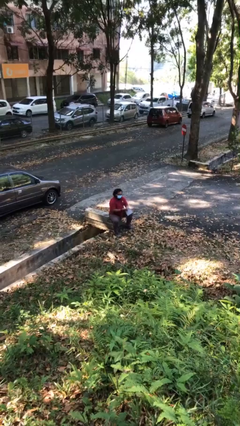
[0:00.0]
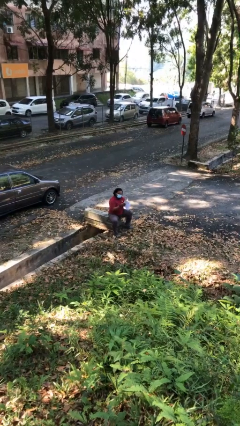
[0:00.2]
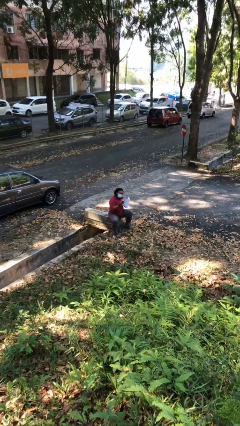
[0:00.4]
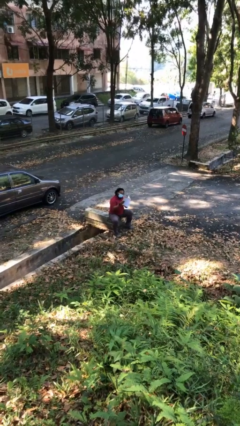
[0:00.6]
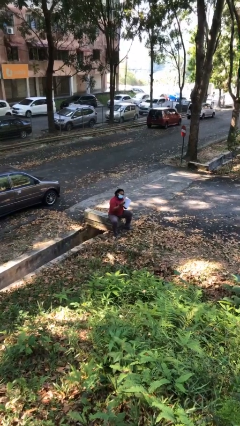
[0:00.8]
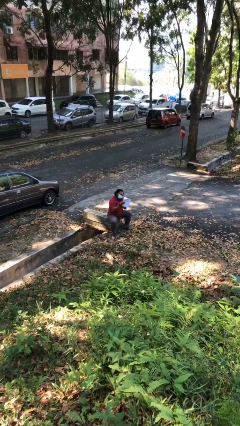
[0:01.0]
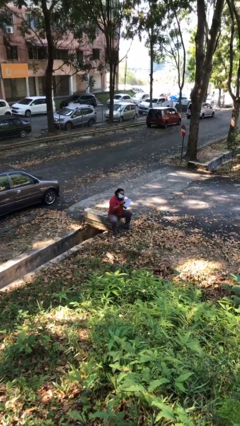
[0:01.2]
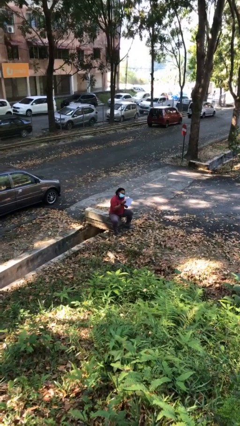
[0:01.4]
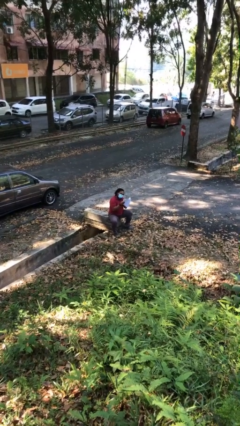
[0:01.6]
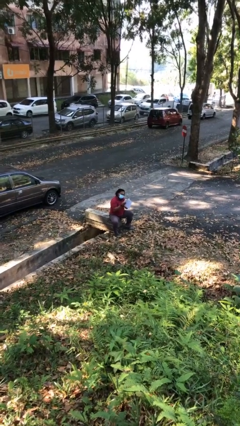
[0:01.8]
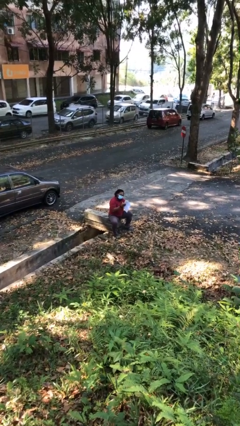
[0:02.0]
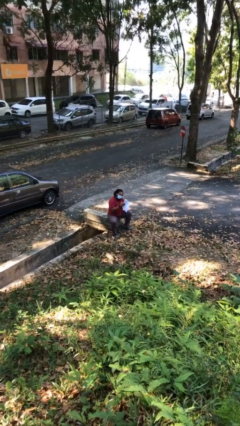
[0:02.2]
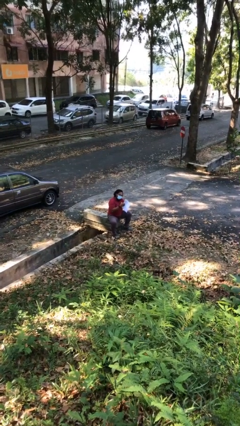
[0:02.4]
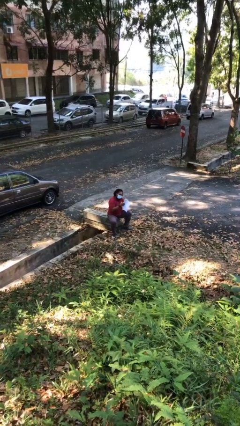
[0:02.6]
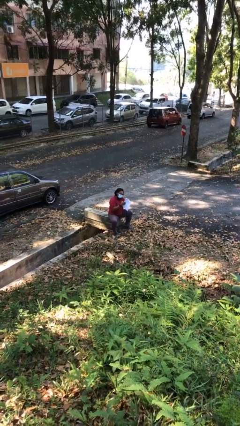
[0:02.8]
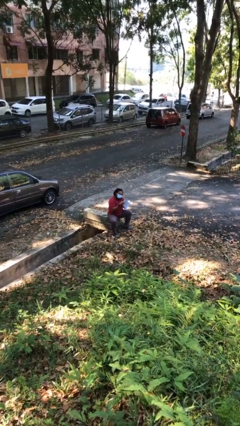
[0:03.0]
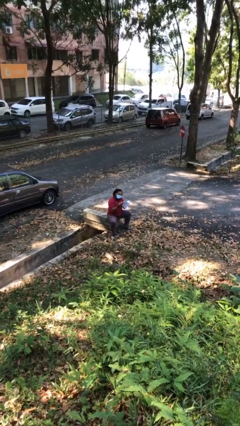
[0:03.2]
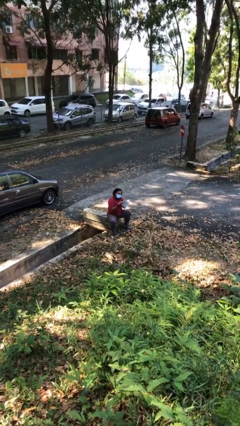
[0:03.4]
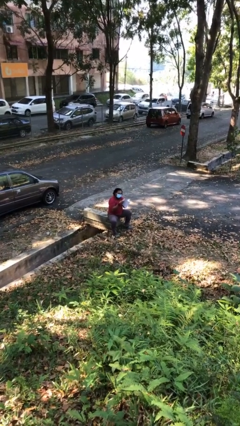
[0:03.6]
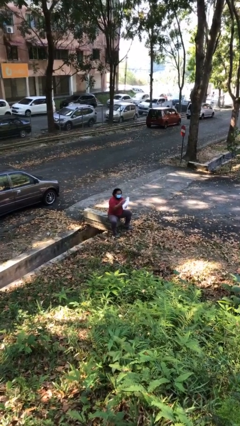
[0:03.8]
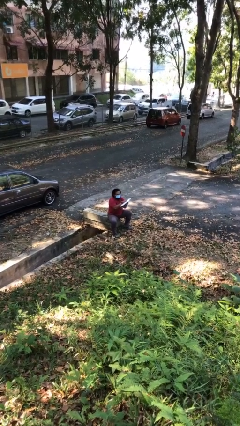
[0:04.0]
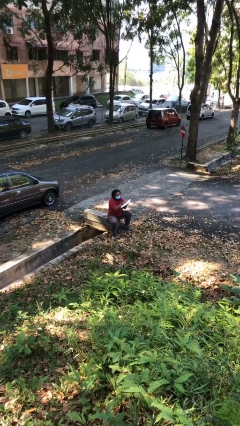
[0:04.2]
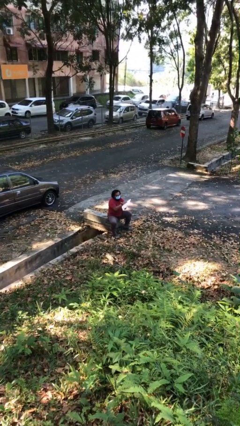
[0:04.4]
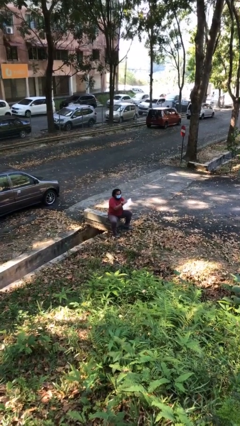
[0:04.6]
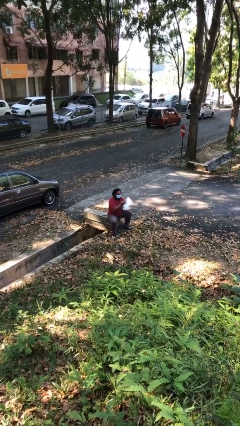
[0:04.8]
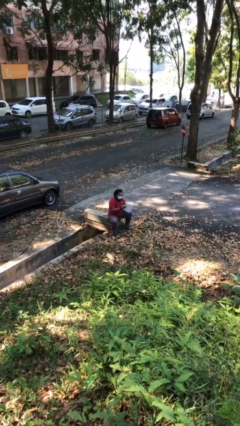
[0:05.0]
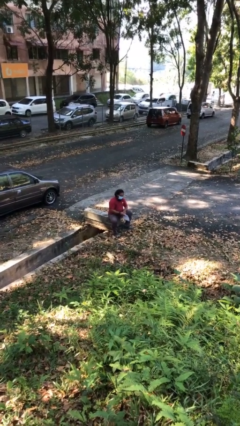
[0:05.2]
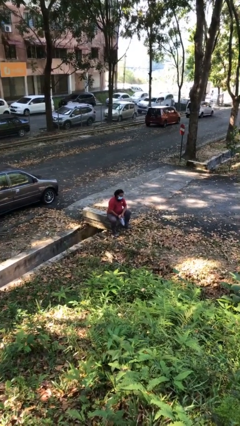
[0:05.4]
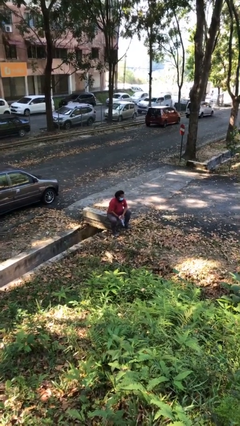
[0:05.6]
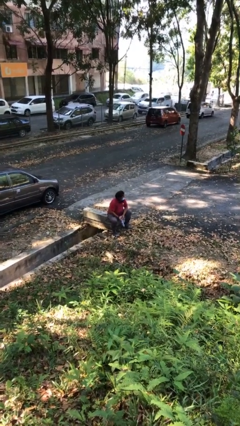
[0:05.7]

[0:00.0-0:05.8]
person reads document

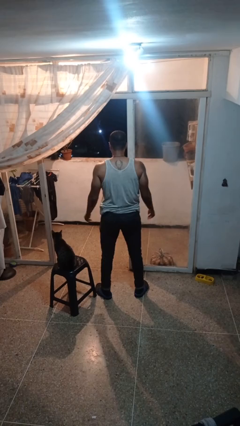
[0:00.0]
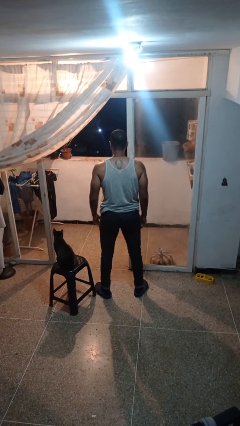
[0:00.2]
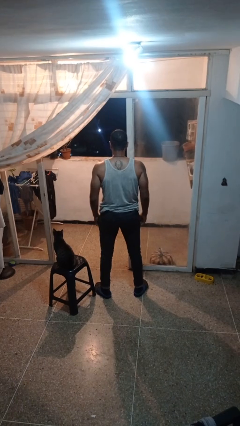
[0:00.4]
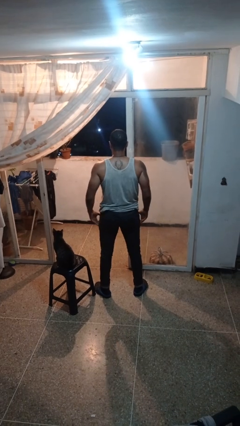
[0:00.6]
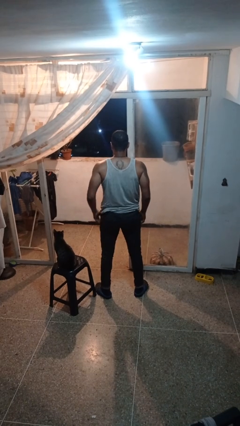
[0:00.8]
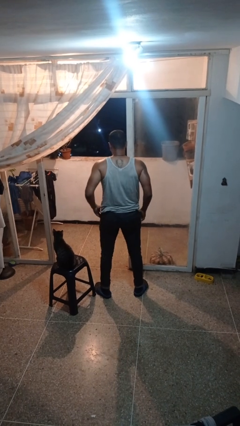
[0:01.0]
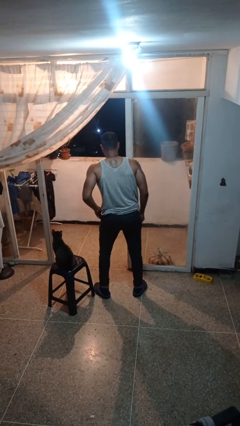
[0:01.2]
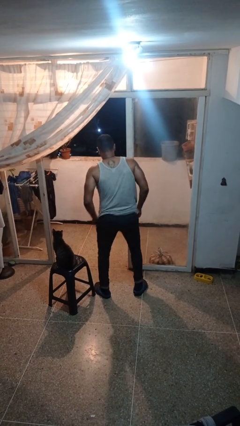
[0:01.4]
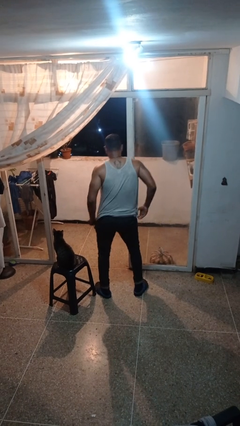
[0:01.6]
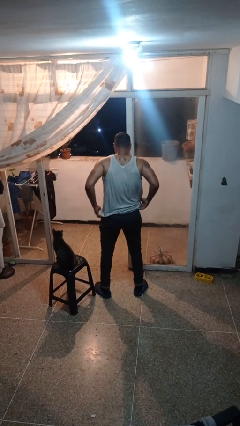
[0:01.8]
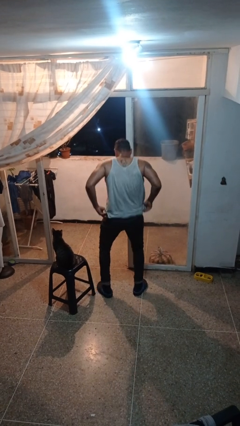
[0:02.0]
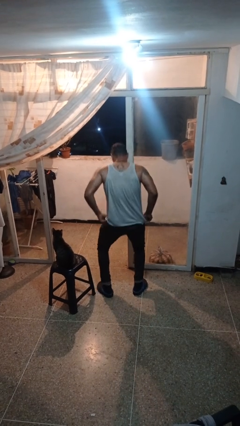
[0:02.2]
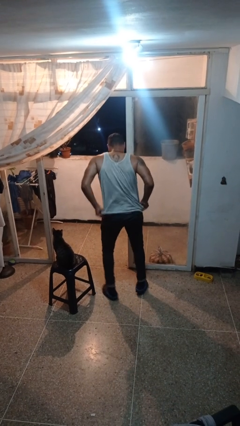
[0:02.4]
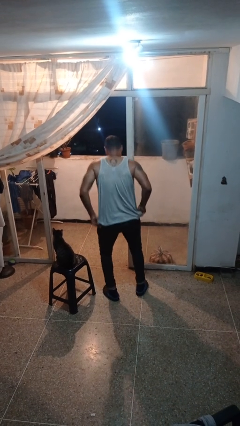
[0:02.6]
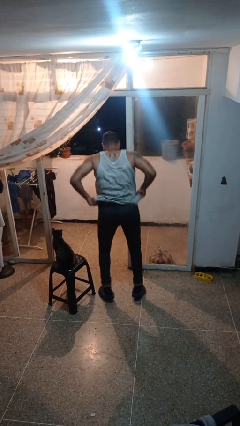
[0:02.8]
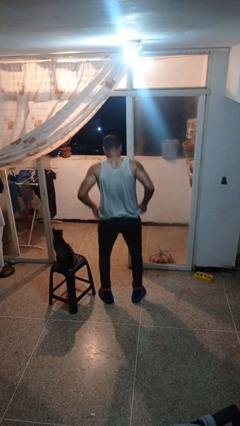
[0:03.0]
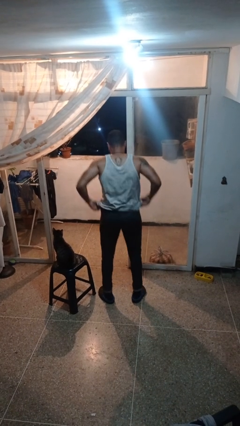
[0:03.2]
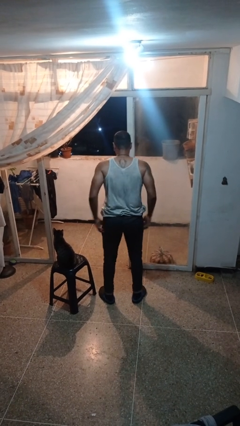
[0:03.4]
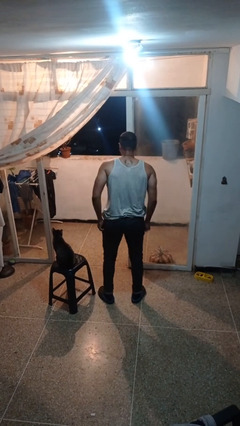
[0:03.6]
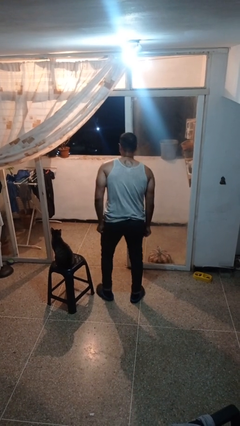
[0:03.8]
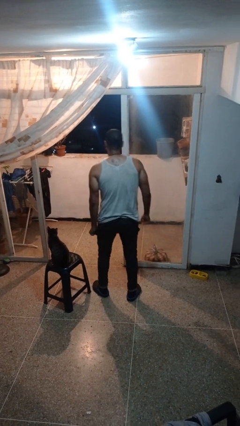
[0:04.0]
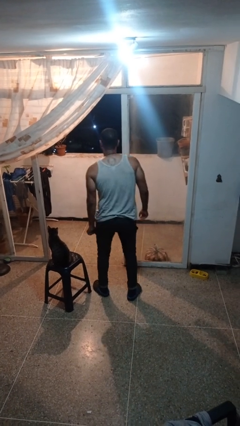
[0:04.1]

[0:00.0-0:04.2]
person hikes up pants

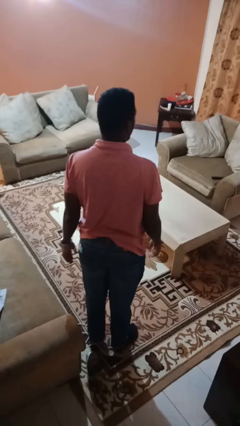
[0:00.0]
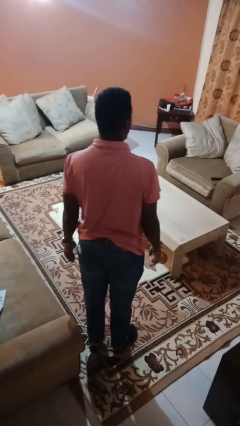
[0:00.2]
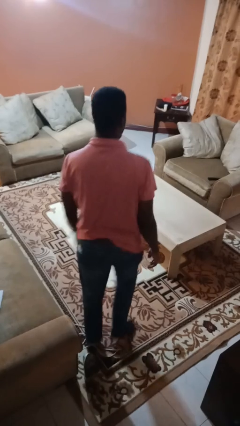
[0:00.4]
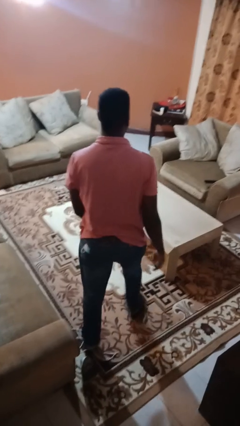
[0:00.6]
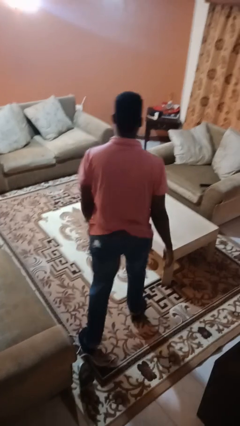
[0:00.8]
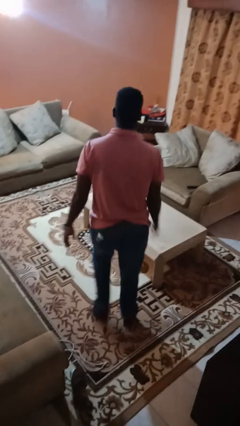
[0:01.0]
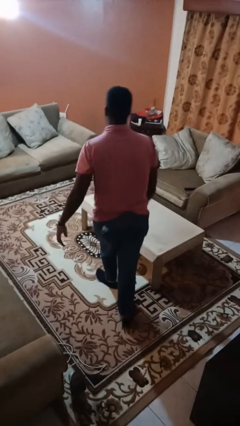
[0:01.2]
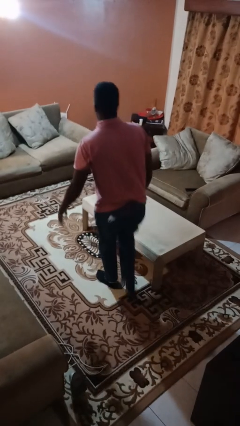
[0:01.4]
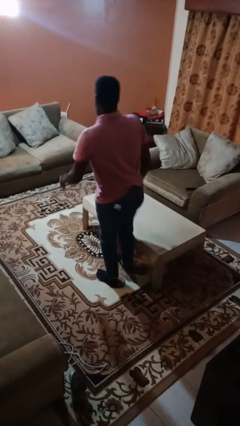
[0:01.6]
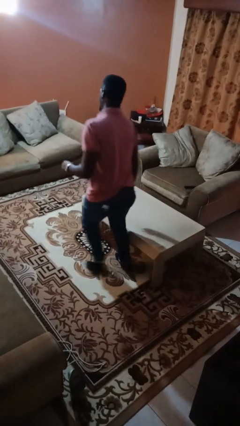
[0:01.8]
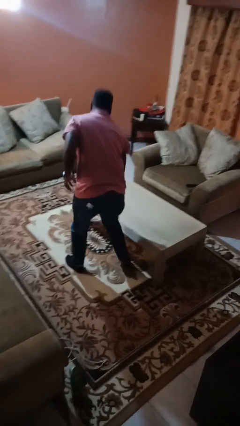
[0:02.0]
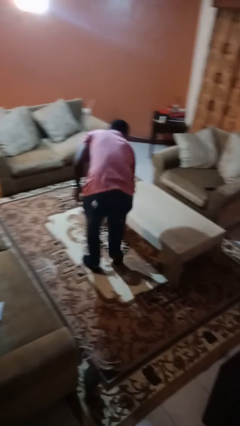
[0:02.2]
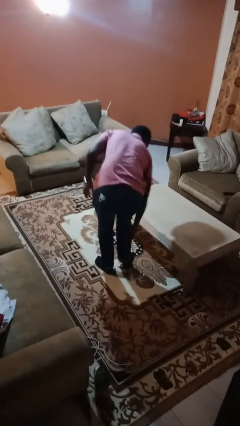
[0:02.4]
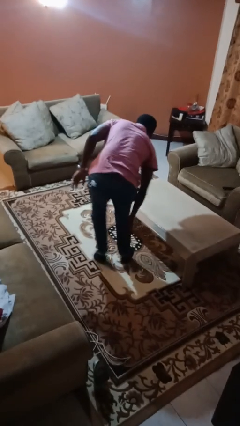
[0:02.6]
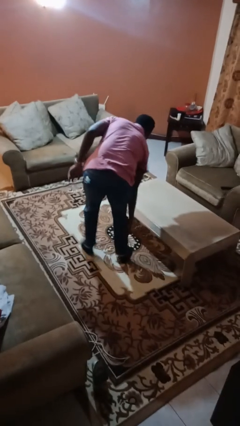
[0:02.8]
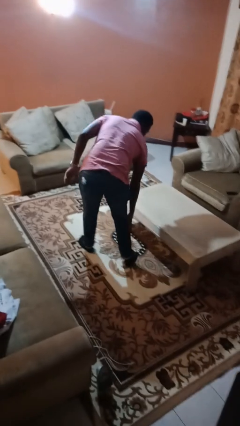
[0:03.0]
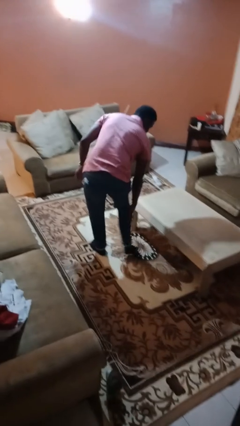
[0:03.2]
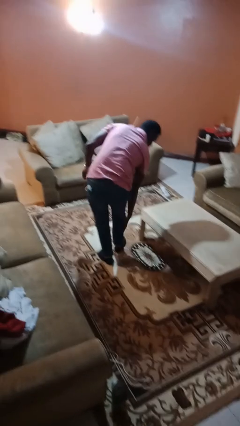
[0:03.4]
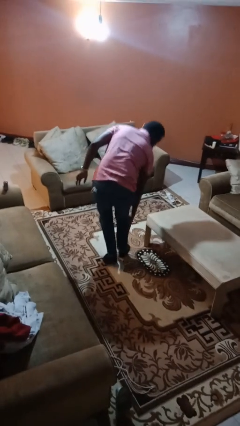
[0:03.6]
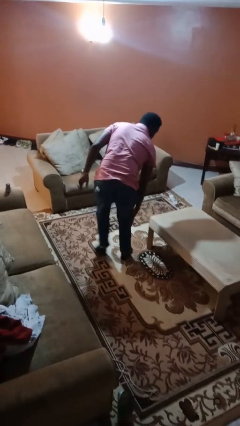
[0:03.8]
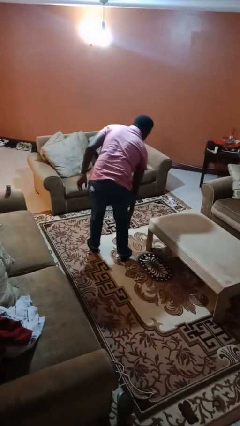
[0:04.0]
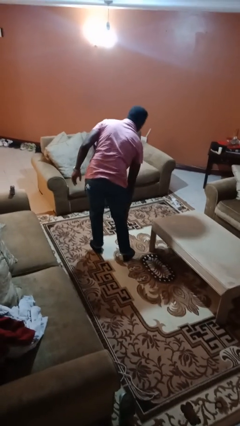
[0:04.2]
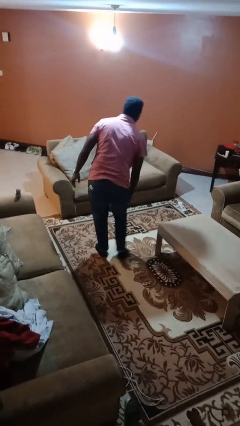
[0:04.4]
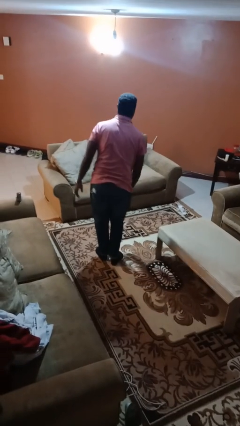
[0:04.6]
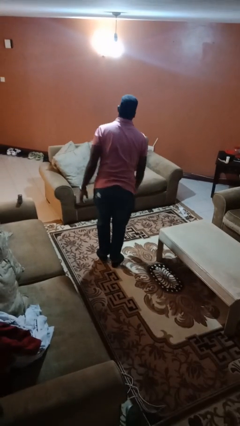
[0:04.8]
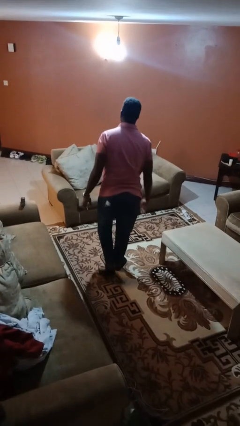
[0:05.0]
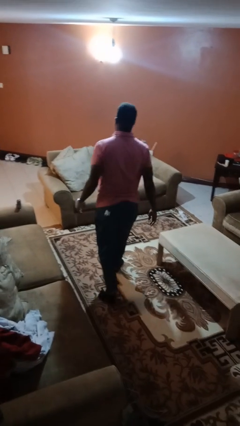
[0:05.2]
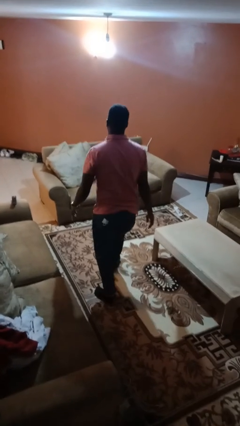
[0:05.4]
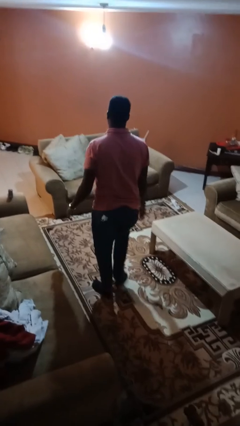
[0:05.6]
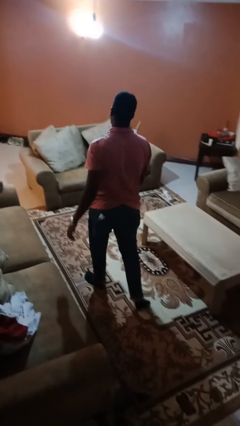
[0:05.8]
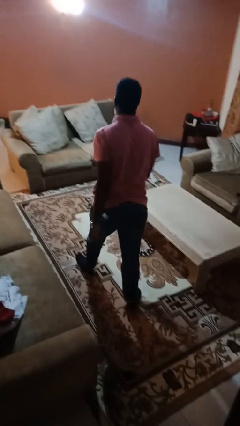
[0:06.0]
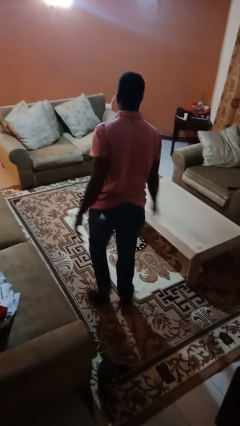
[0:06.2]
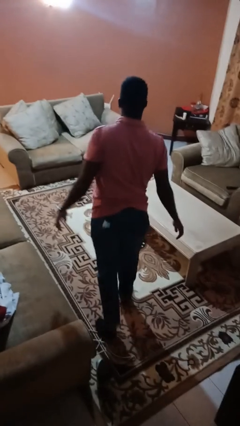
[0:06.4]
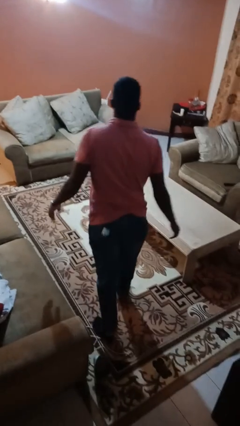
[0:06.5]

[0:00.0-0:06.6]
person bumps into table

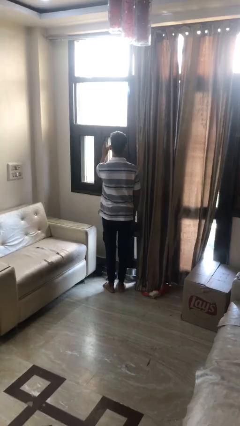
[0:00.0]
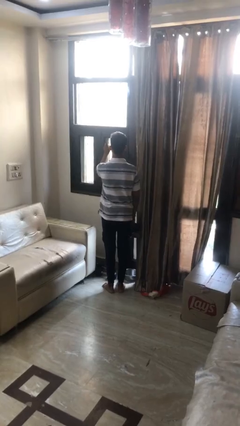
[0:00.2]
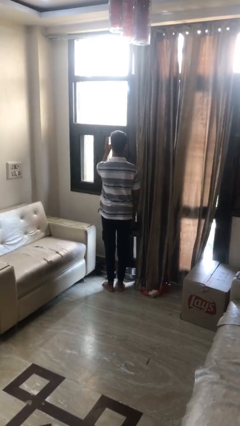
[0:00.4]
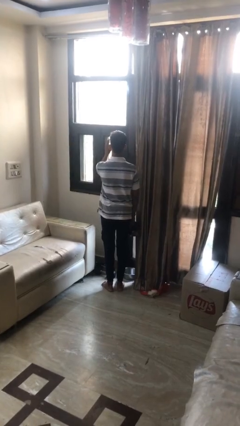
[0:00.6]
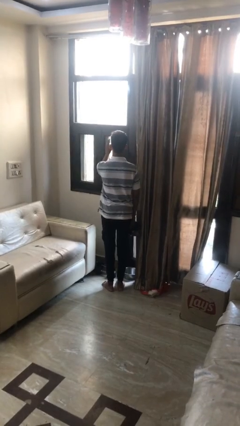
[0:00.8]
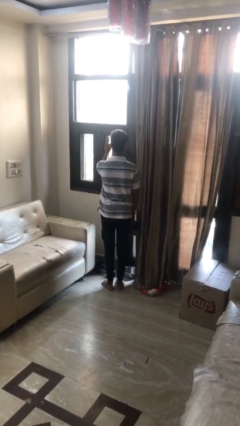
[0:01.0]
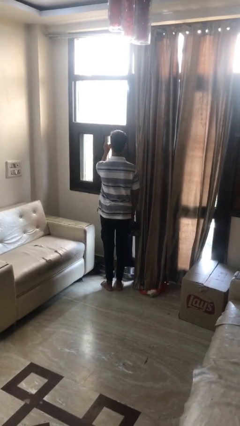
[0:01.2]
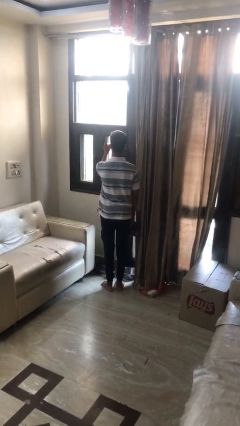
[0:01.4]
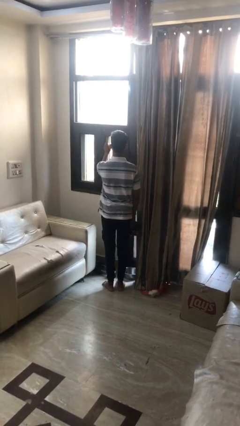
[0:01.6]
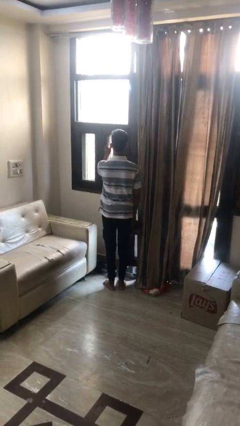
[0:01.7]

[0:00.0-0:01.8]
person sprays from bottle
